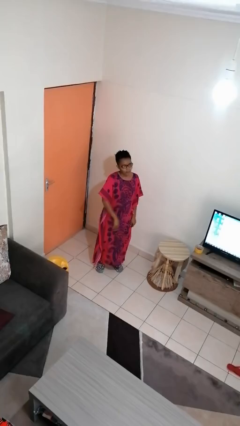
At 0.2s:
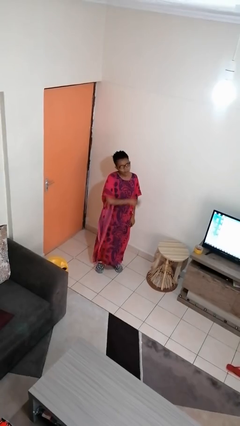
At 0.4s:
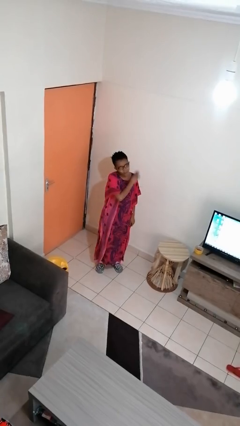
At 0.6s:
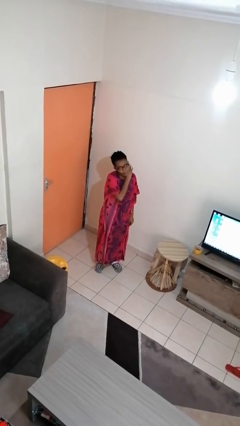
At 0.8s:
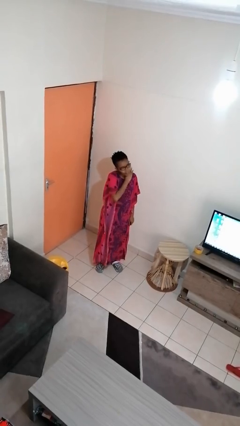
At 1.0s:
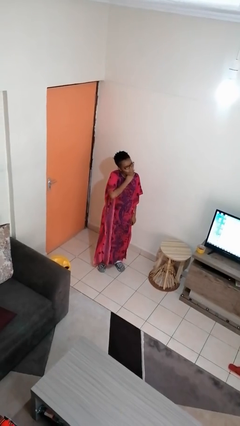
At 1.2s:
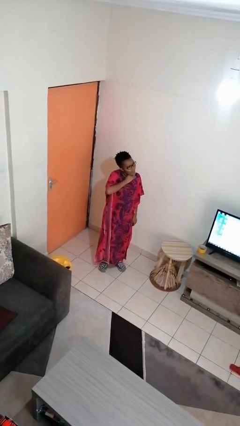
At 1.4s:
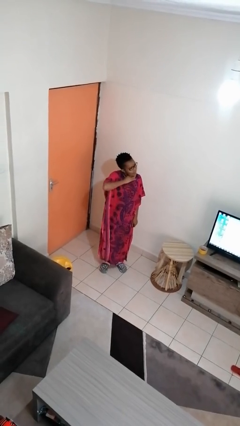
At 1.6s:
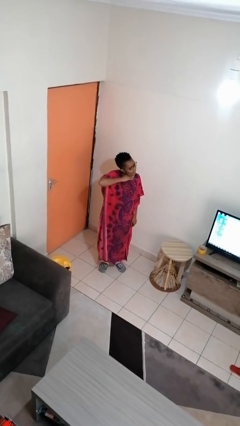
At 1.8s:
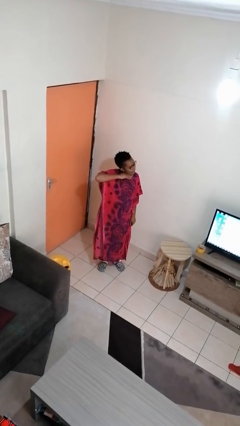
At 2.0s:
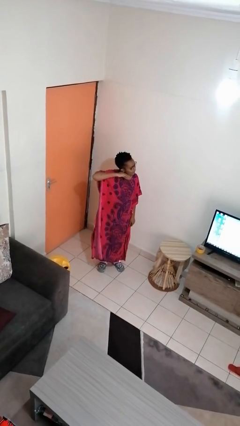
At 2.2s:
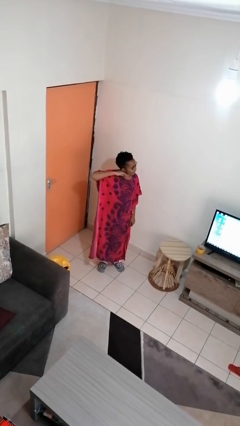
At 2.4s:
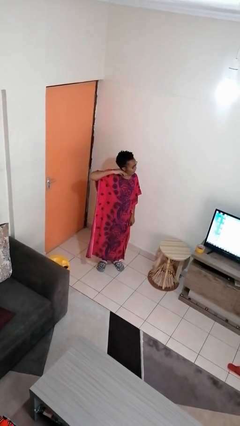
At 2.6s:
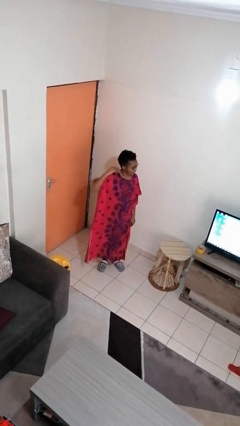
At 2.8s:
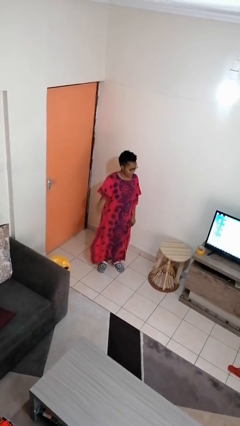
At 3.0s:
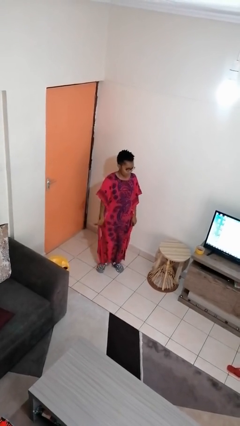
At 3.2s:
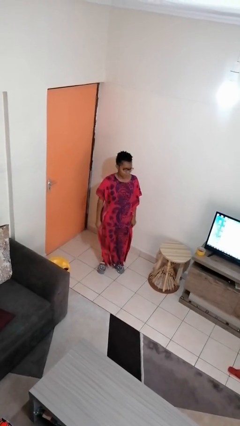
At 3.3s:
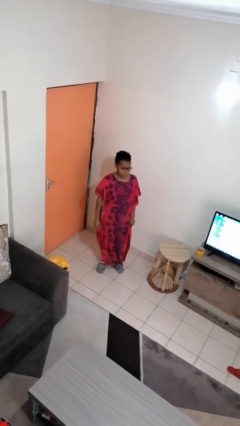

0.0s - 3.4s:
person gestures cut

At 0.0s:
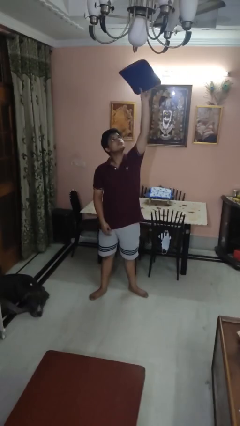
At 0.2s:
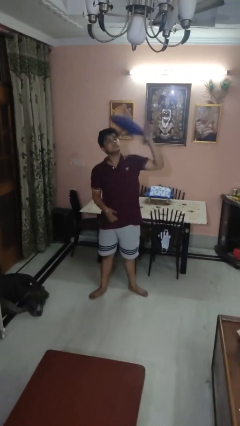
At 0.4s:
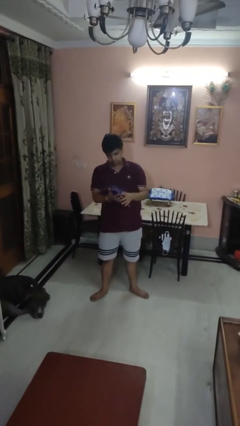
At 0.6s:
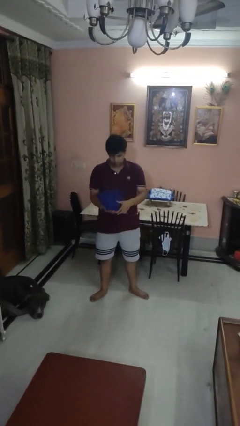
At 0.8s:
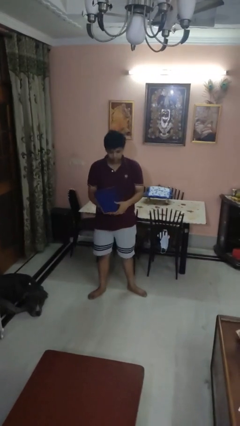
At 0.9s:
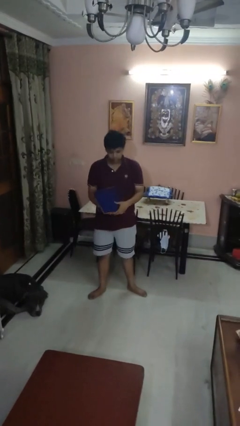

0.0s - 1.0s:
person catches dropped object

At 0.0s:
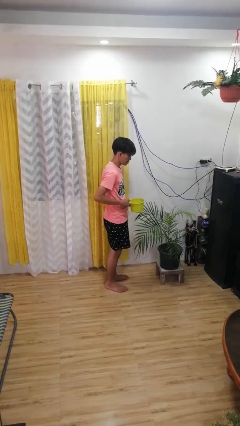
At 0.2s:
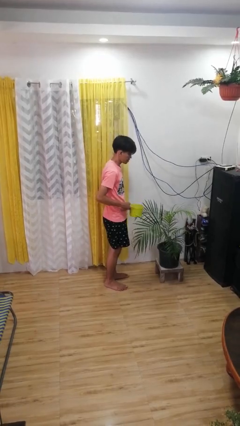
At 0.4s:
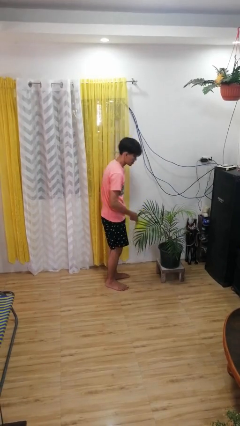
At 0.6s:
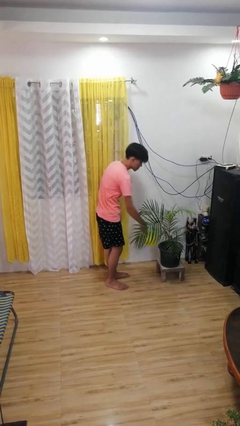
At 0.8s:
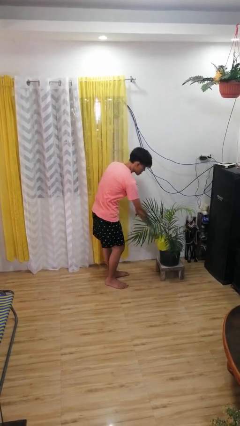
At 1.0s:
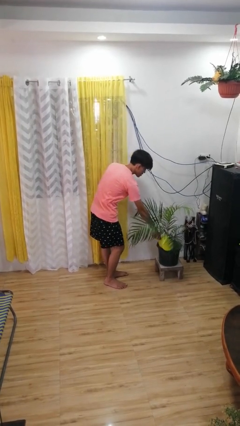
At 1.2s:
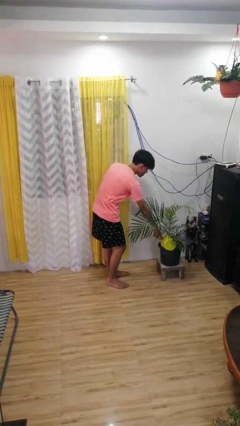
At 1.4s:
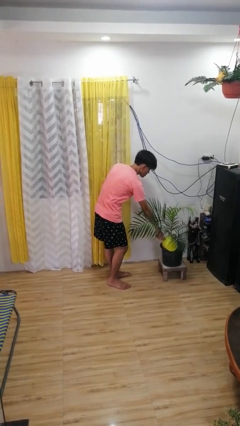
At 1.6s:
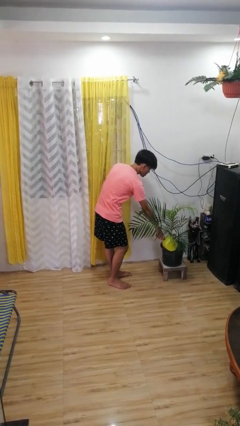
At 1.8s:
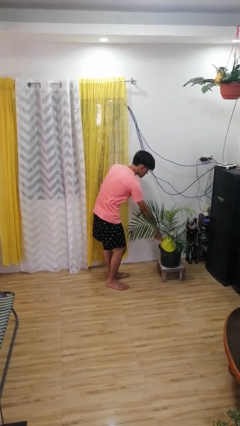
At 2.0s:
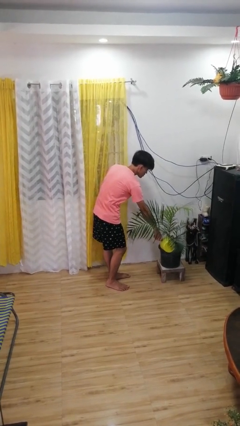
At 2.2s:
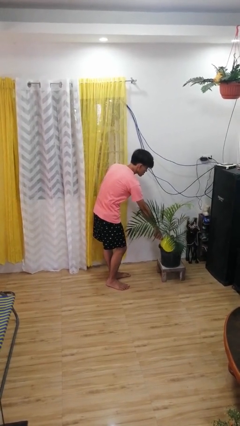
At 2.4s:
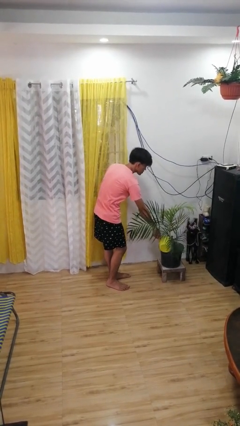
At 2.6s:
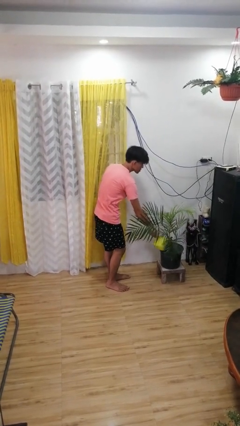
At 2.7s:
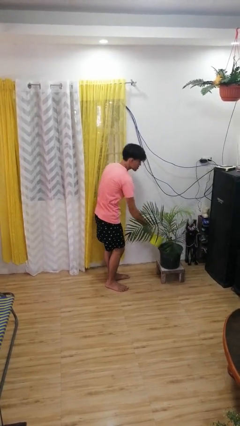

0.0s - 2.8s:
person waters houseplant

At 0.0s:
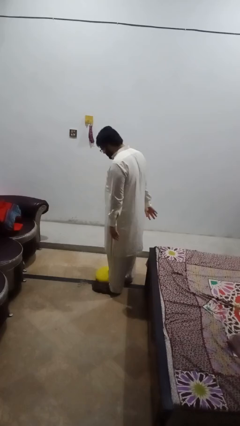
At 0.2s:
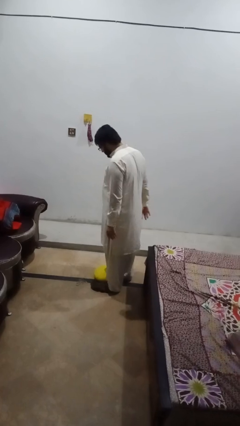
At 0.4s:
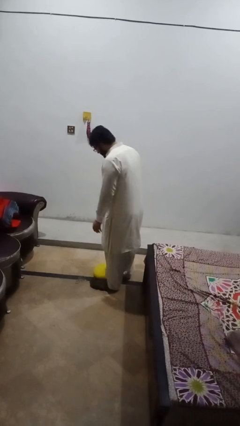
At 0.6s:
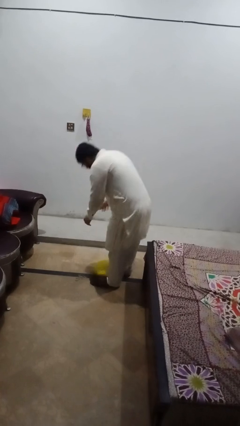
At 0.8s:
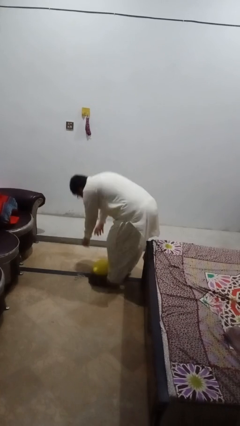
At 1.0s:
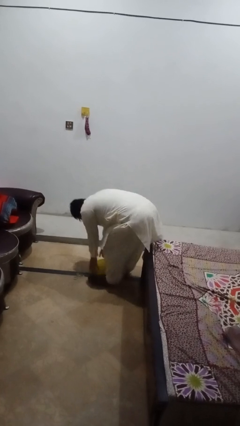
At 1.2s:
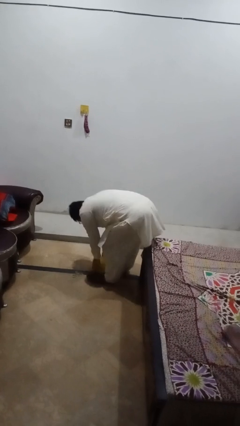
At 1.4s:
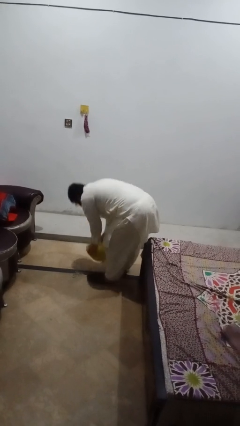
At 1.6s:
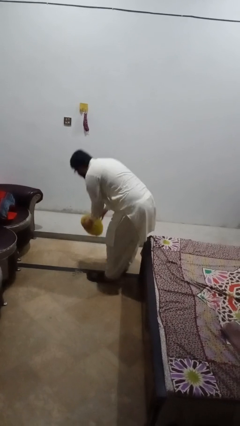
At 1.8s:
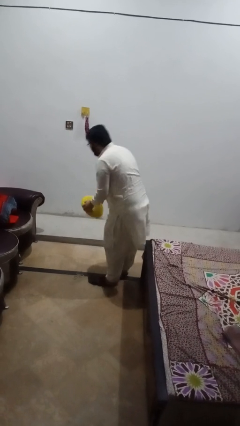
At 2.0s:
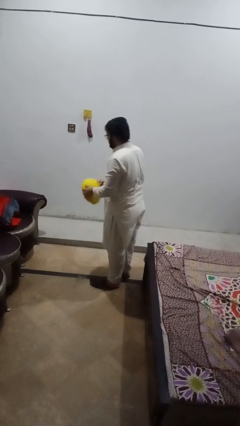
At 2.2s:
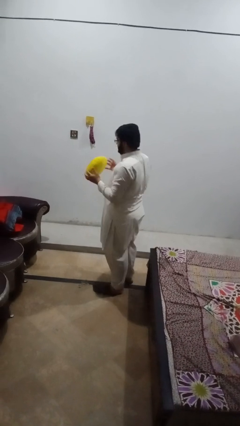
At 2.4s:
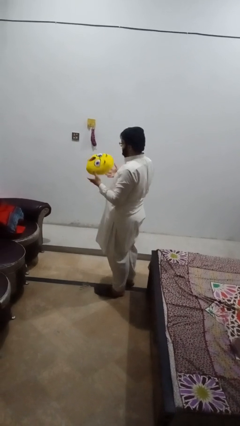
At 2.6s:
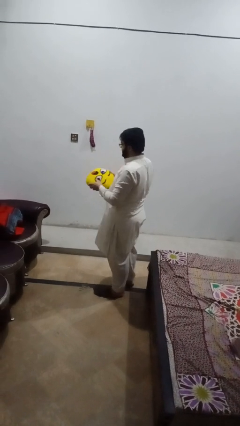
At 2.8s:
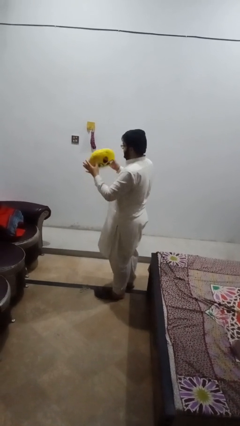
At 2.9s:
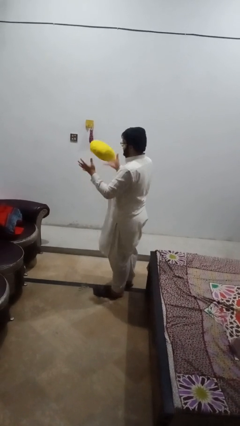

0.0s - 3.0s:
person picks up object from floor

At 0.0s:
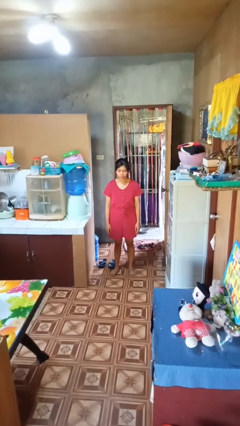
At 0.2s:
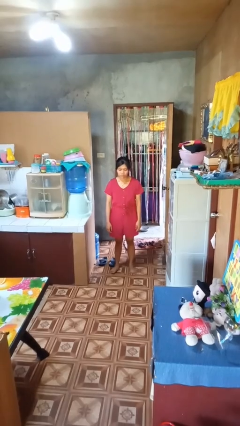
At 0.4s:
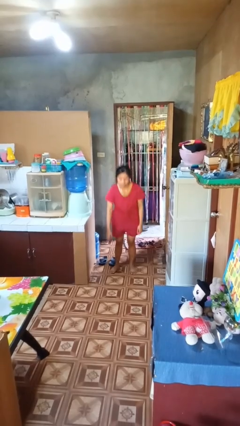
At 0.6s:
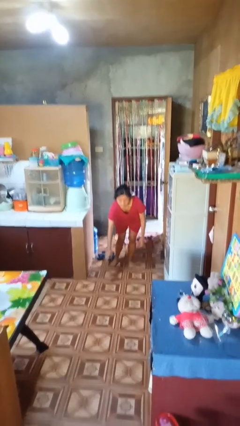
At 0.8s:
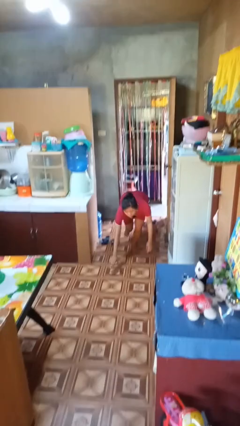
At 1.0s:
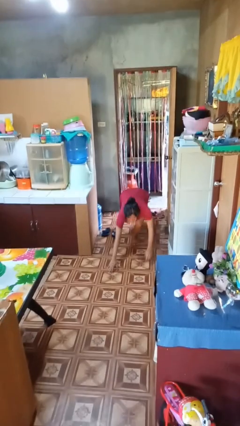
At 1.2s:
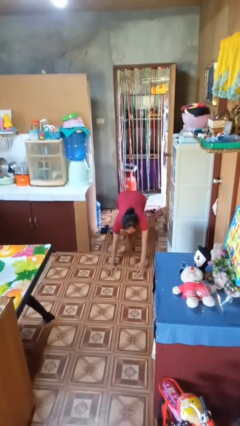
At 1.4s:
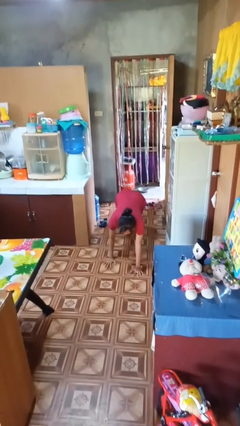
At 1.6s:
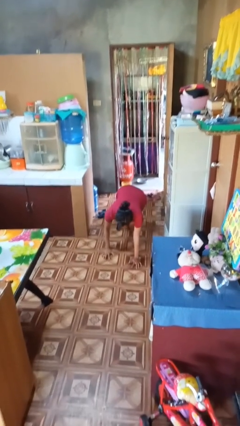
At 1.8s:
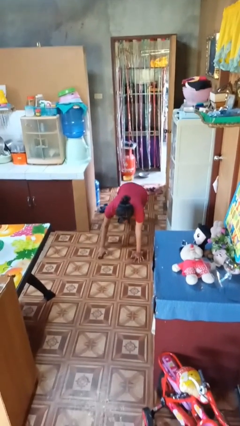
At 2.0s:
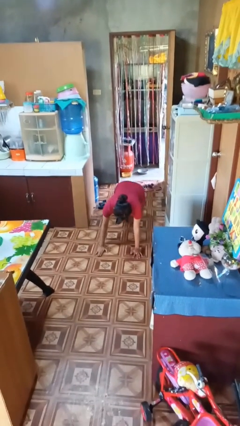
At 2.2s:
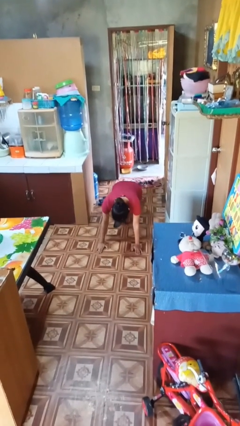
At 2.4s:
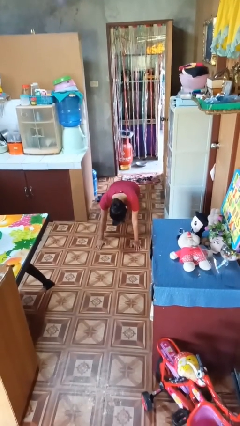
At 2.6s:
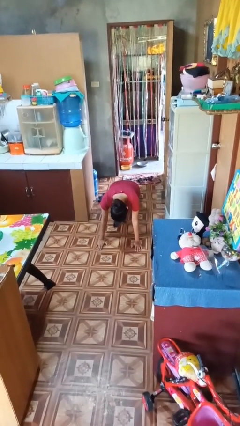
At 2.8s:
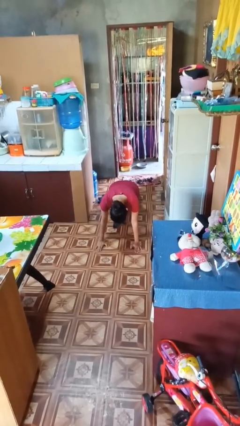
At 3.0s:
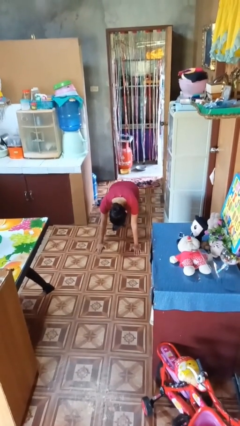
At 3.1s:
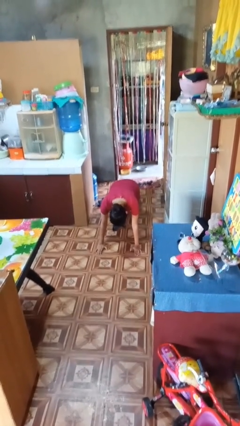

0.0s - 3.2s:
person exercises with plank

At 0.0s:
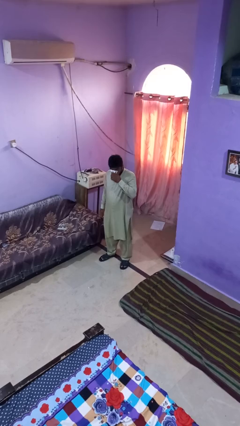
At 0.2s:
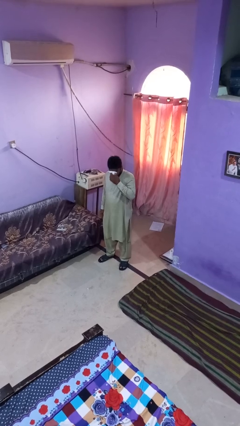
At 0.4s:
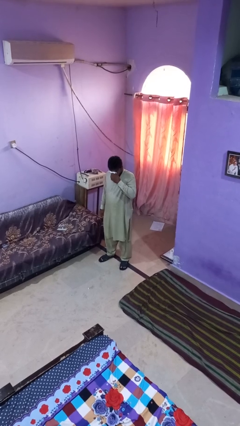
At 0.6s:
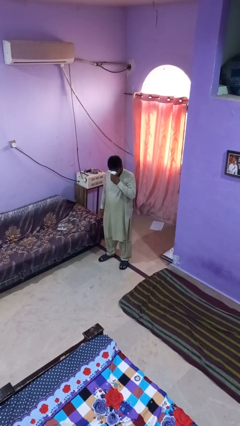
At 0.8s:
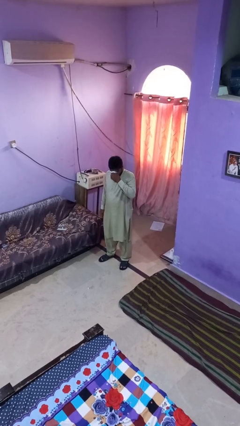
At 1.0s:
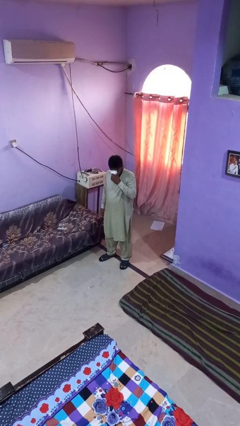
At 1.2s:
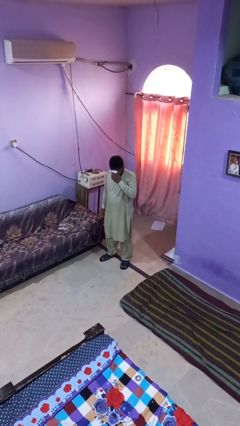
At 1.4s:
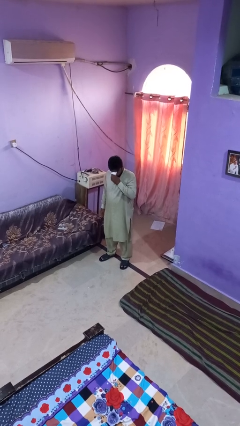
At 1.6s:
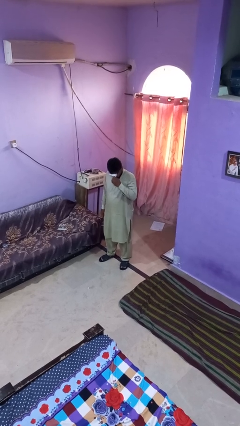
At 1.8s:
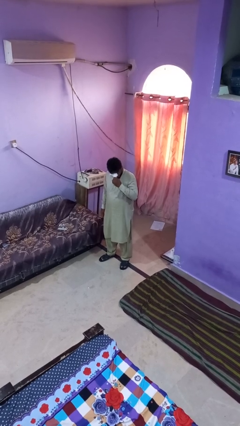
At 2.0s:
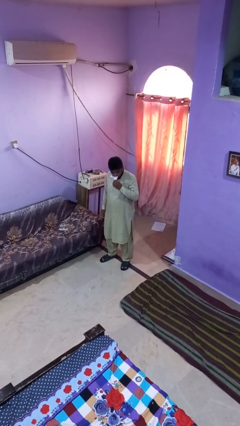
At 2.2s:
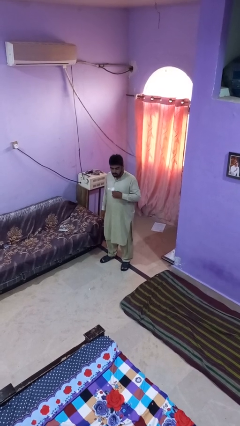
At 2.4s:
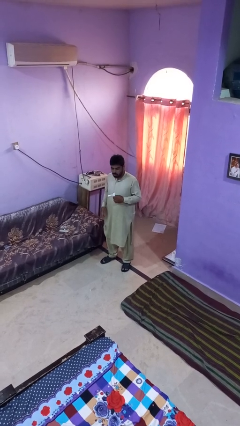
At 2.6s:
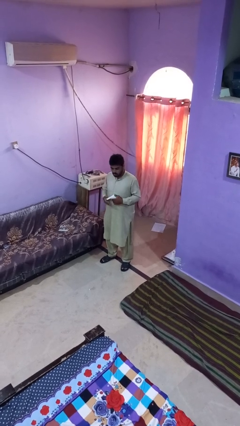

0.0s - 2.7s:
person blows nose

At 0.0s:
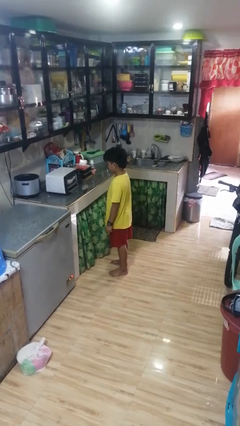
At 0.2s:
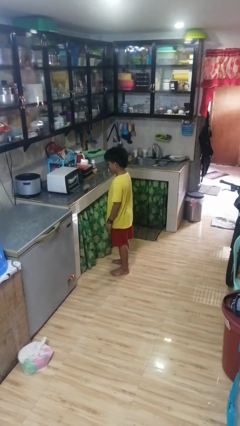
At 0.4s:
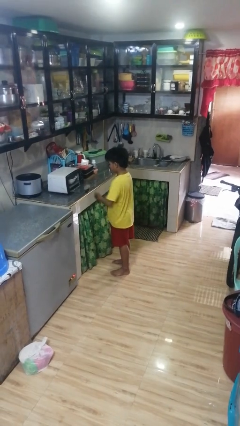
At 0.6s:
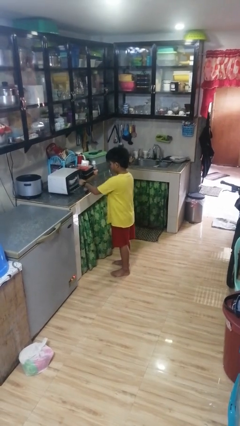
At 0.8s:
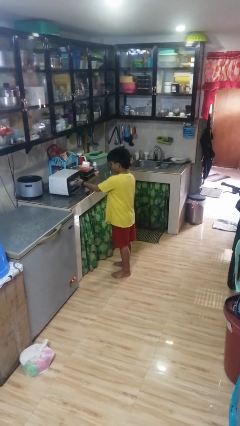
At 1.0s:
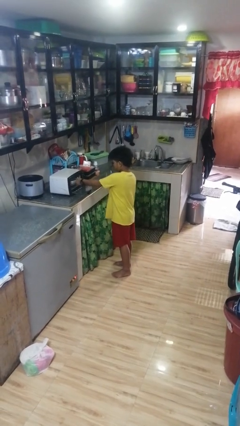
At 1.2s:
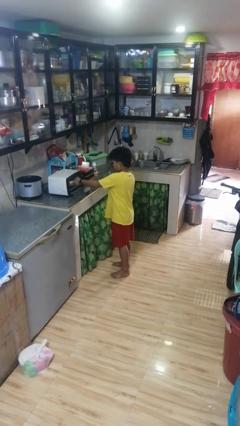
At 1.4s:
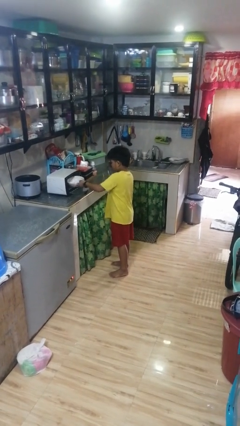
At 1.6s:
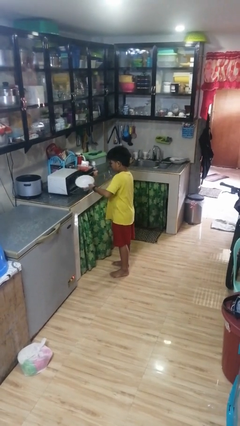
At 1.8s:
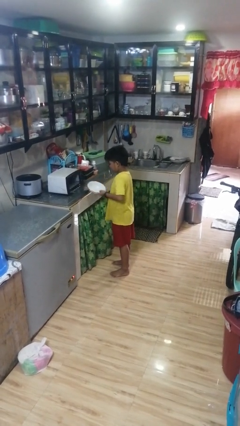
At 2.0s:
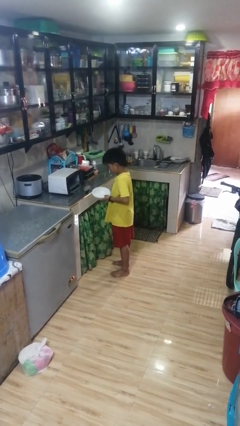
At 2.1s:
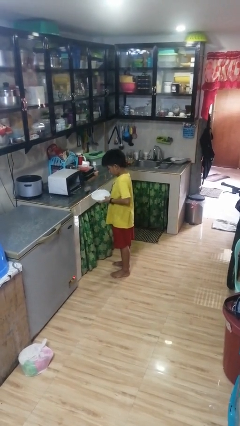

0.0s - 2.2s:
person takes object from microwave
